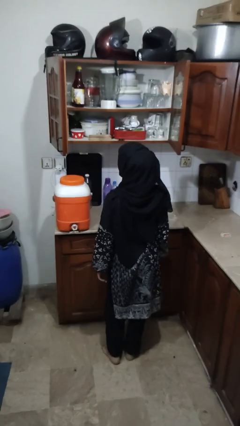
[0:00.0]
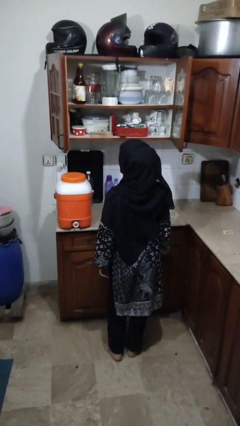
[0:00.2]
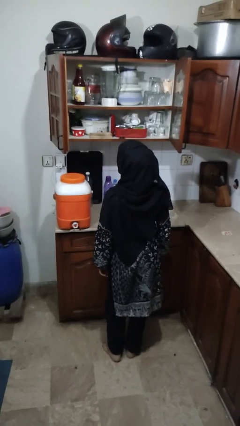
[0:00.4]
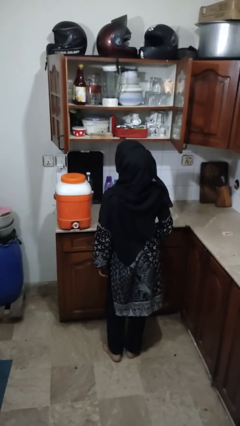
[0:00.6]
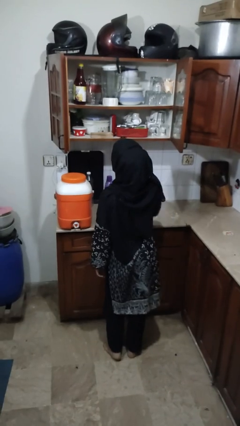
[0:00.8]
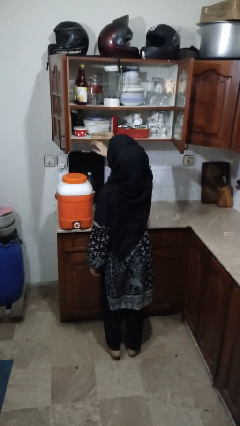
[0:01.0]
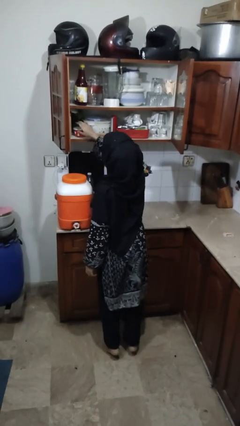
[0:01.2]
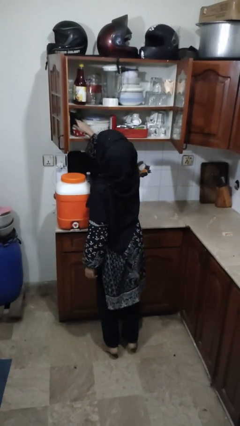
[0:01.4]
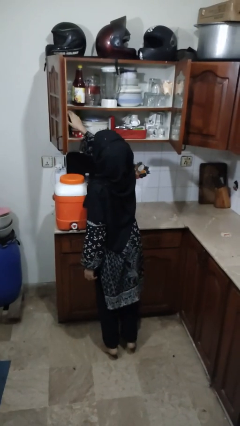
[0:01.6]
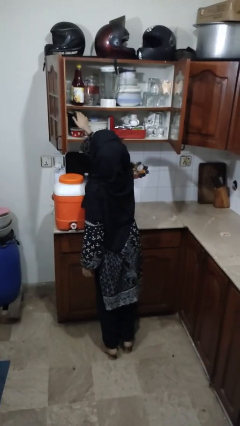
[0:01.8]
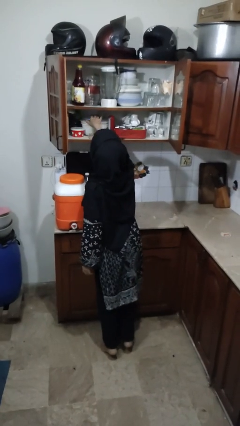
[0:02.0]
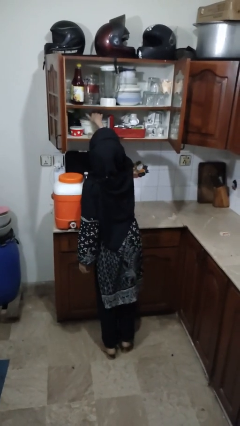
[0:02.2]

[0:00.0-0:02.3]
person searches in cabinet

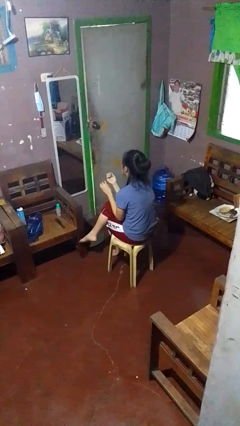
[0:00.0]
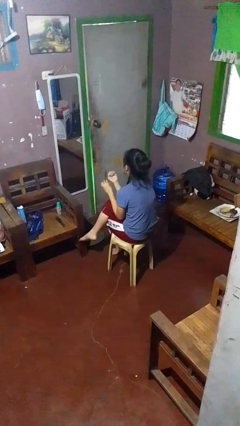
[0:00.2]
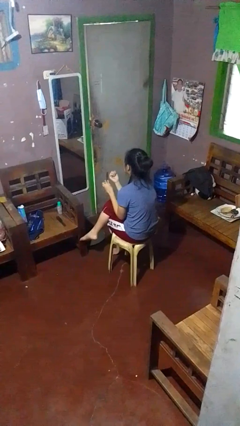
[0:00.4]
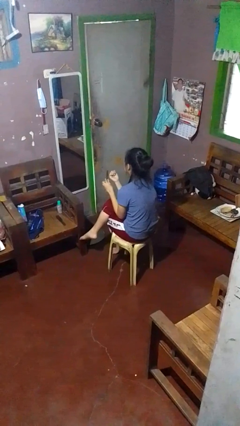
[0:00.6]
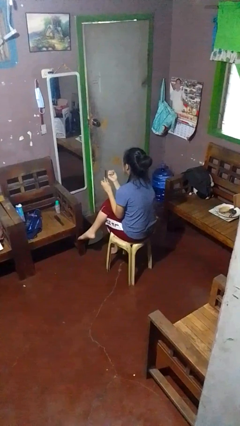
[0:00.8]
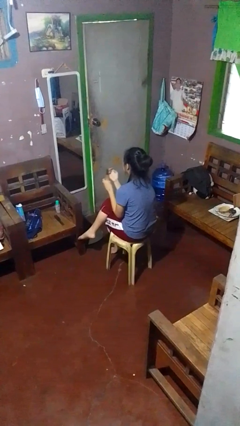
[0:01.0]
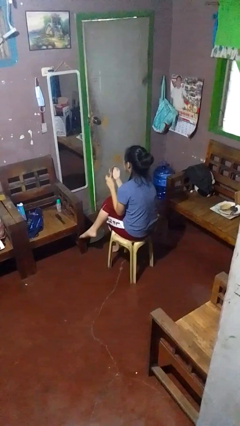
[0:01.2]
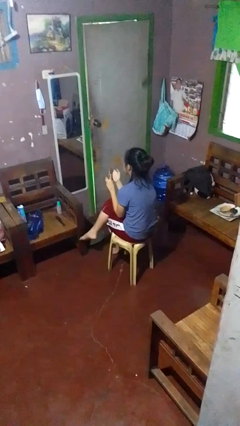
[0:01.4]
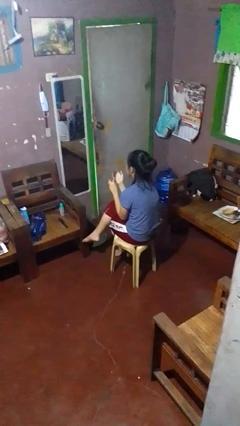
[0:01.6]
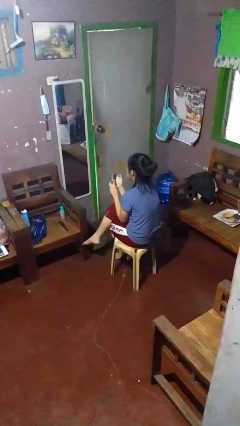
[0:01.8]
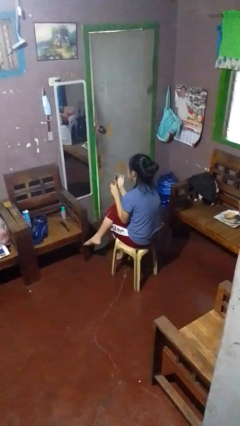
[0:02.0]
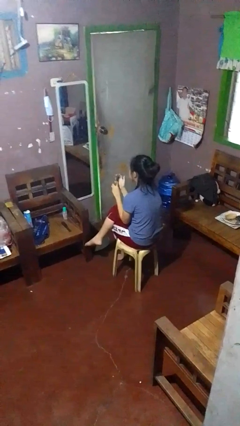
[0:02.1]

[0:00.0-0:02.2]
person files fingernails

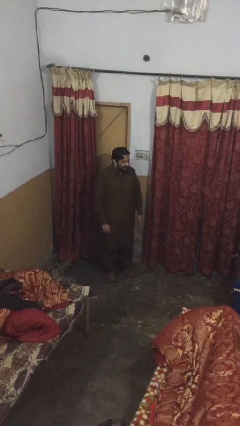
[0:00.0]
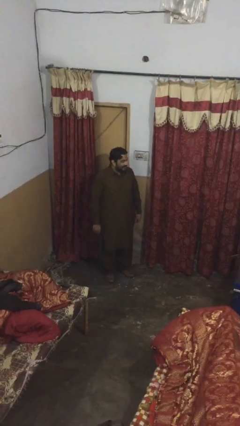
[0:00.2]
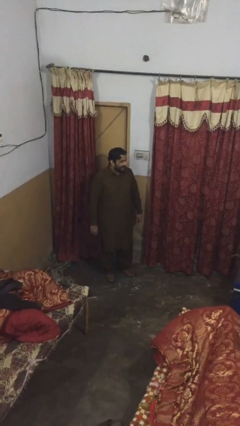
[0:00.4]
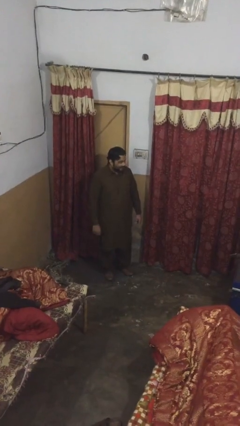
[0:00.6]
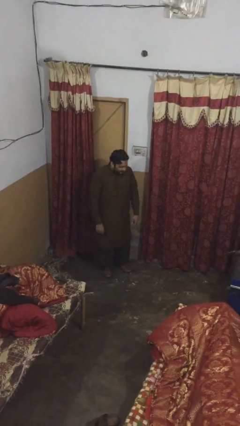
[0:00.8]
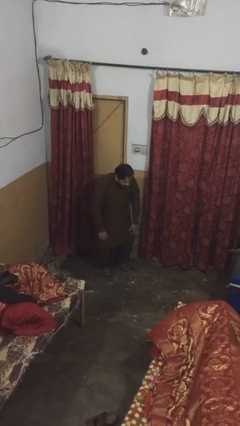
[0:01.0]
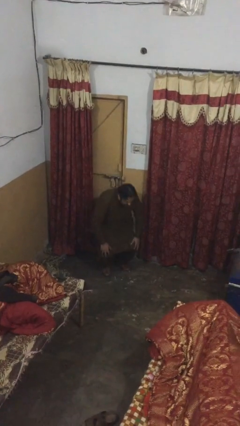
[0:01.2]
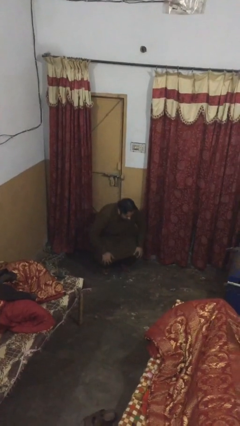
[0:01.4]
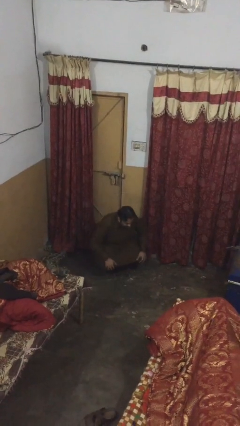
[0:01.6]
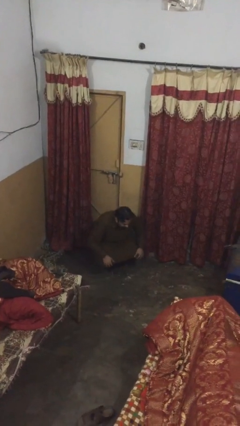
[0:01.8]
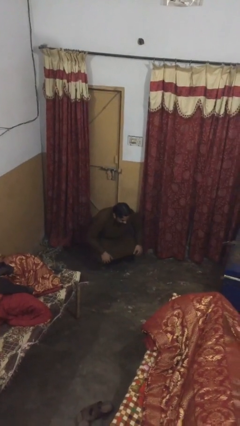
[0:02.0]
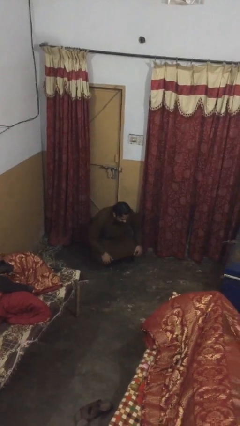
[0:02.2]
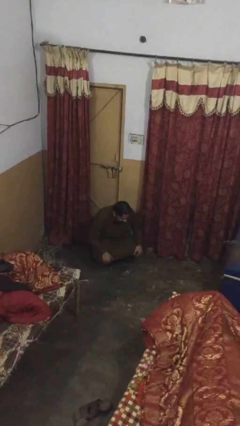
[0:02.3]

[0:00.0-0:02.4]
person sits down

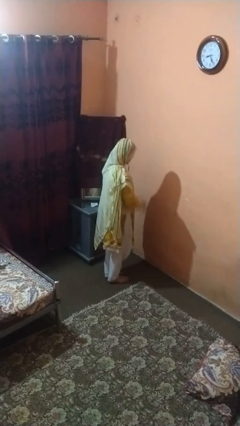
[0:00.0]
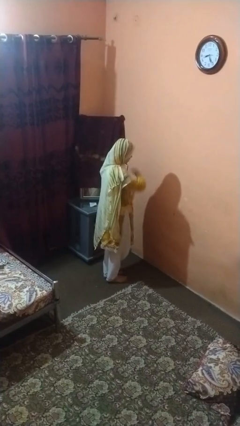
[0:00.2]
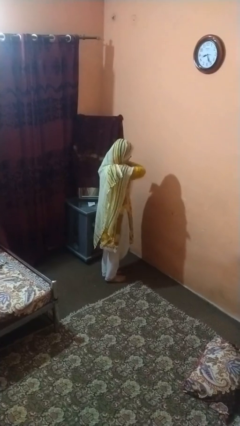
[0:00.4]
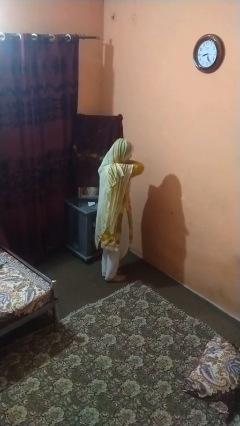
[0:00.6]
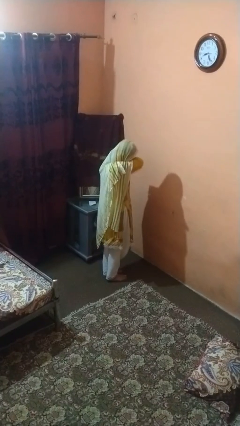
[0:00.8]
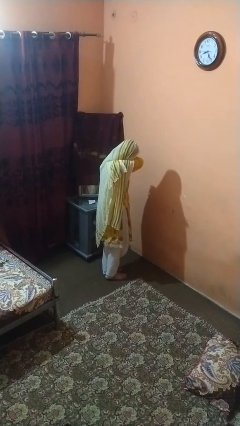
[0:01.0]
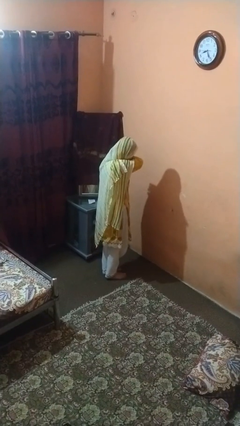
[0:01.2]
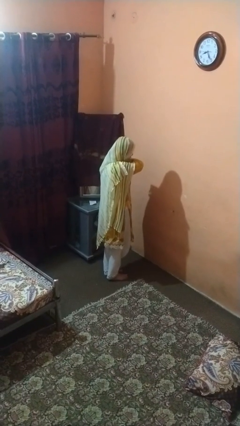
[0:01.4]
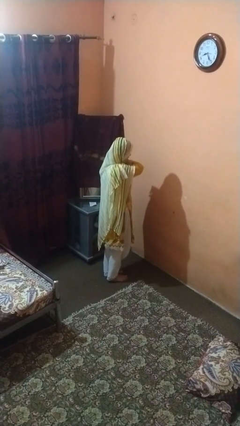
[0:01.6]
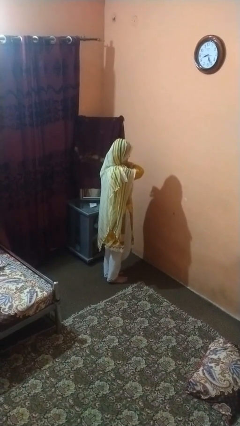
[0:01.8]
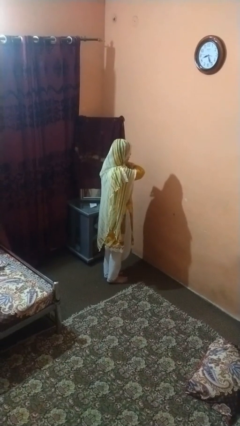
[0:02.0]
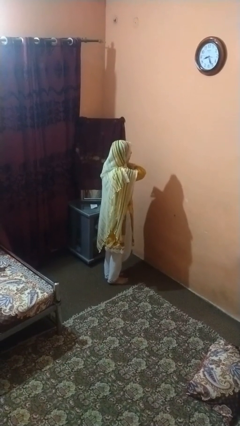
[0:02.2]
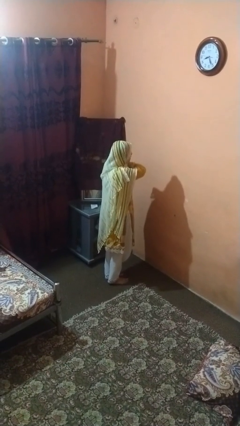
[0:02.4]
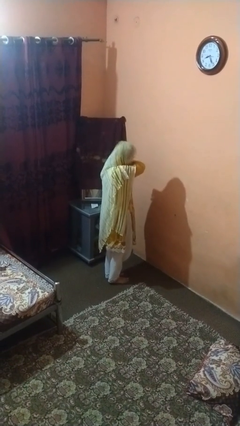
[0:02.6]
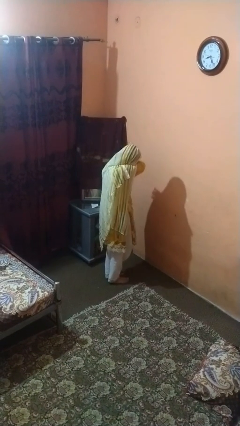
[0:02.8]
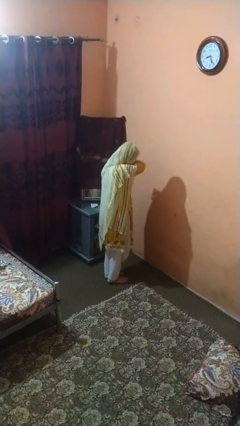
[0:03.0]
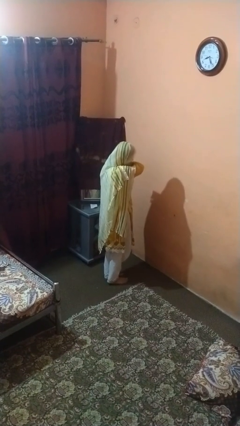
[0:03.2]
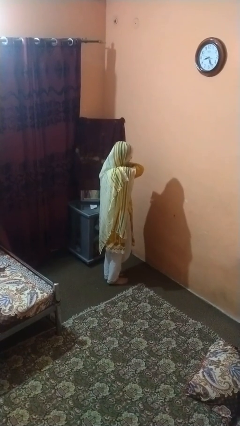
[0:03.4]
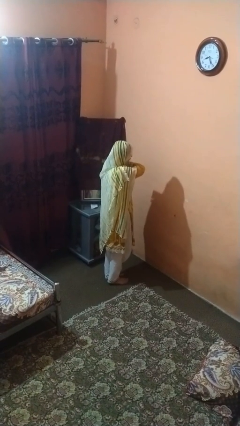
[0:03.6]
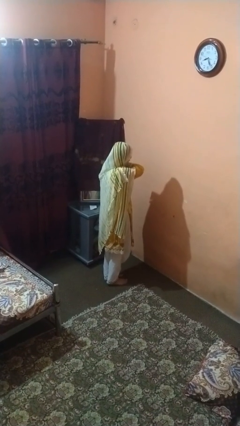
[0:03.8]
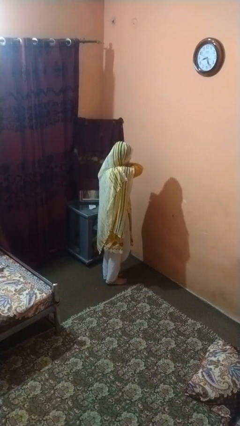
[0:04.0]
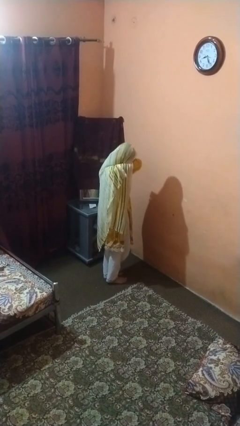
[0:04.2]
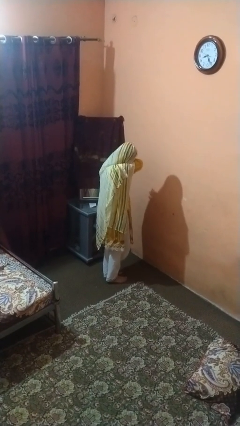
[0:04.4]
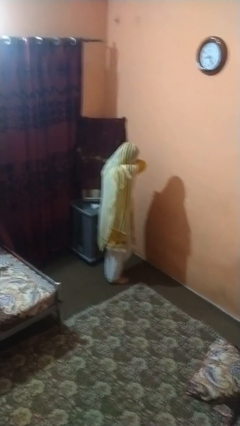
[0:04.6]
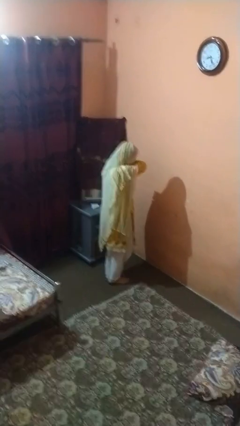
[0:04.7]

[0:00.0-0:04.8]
person sneezes into arm

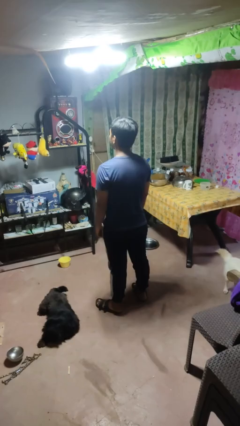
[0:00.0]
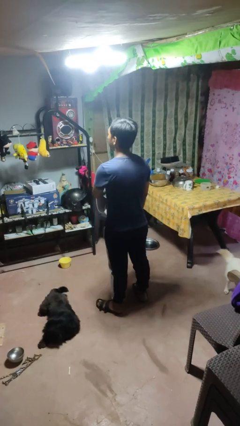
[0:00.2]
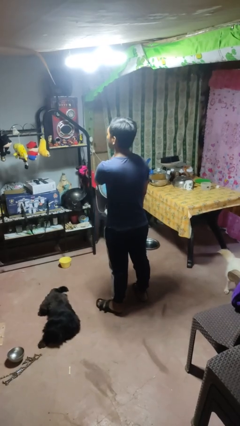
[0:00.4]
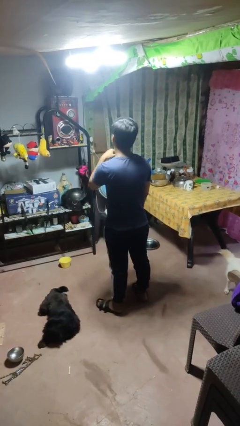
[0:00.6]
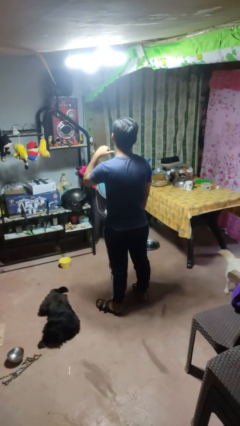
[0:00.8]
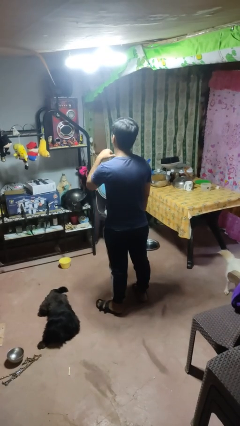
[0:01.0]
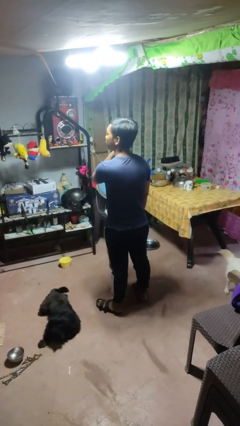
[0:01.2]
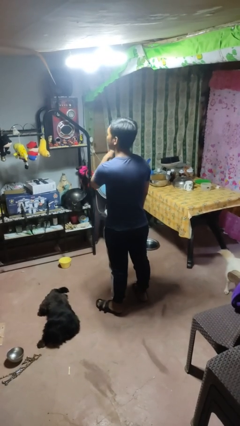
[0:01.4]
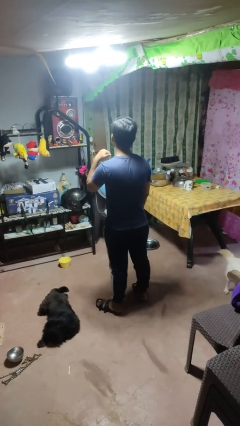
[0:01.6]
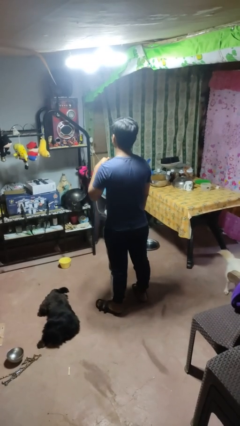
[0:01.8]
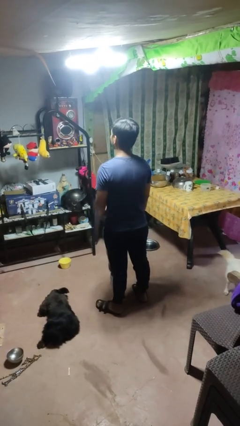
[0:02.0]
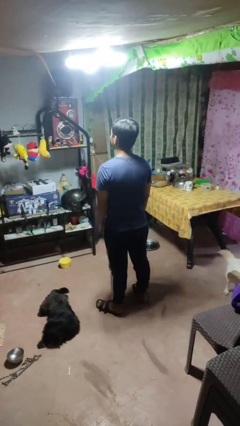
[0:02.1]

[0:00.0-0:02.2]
person gestures cut

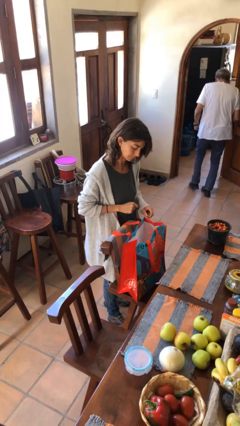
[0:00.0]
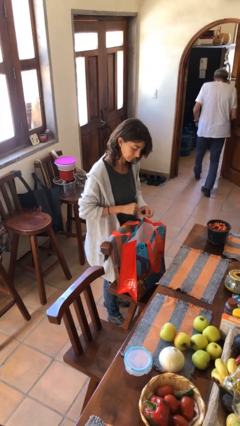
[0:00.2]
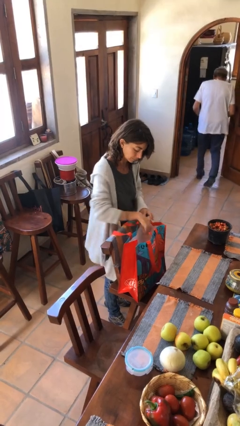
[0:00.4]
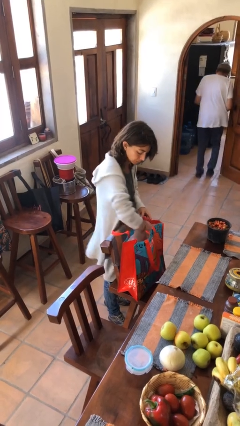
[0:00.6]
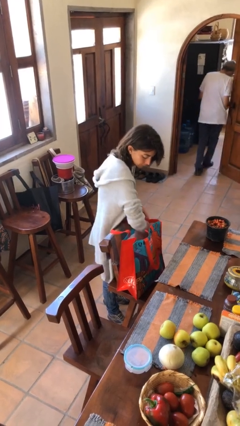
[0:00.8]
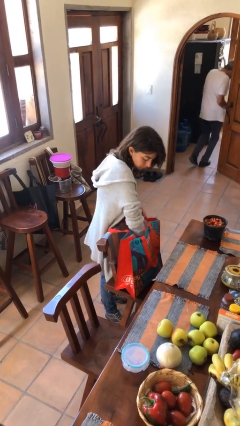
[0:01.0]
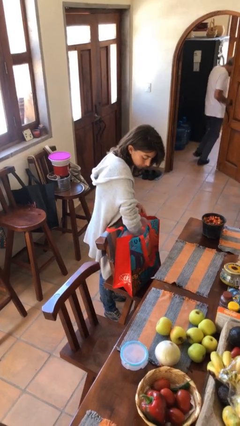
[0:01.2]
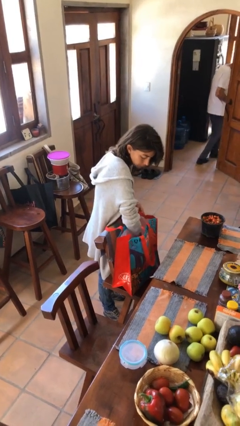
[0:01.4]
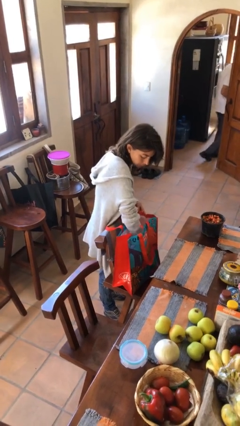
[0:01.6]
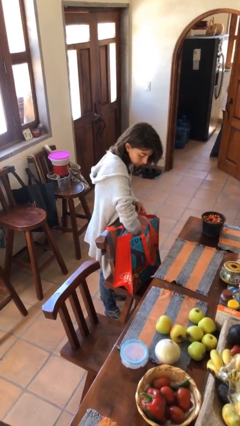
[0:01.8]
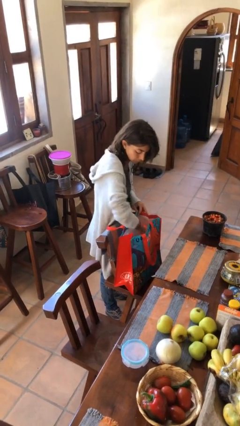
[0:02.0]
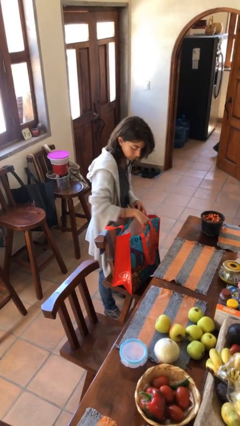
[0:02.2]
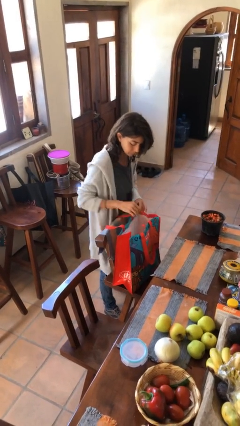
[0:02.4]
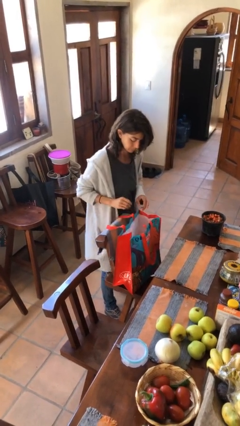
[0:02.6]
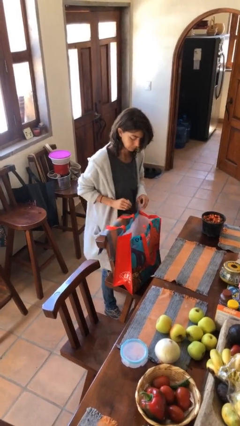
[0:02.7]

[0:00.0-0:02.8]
person searches in bag

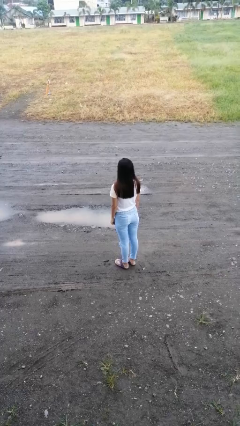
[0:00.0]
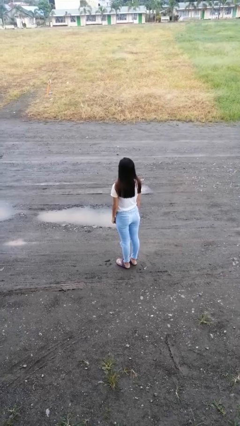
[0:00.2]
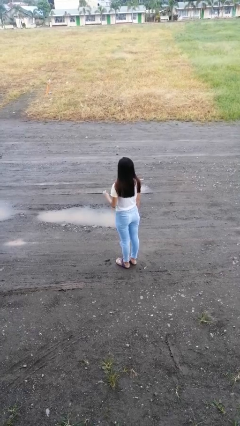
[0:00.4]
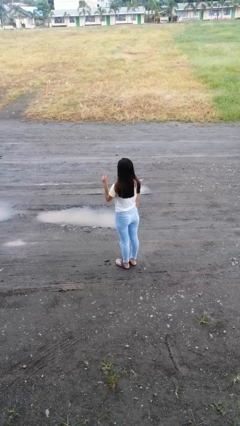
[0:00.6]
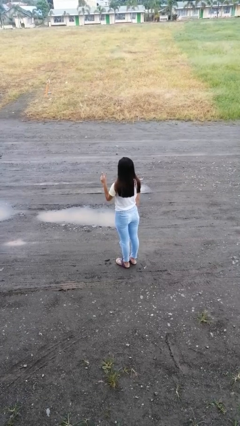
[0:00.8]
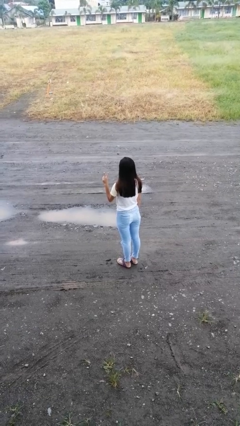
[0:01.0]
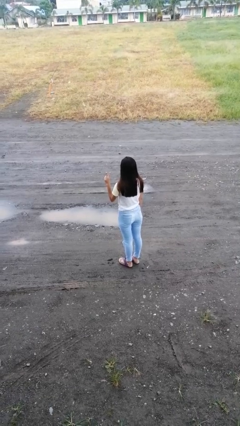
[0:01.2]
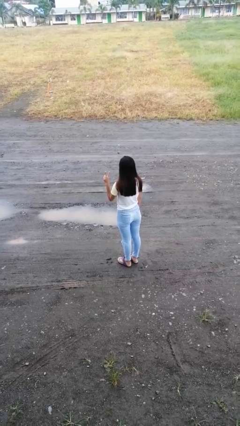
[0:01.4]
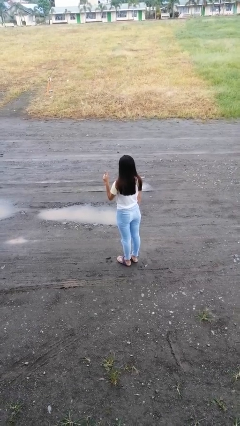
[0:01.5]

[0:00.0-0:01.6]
person gestures peace
